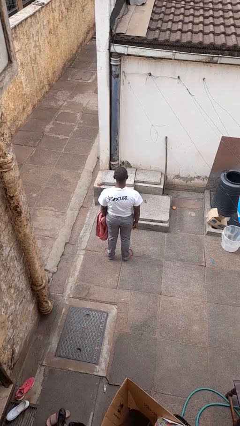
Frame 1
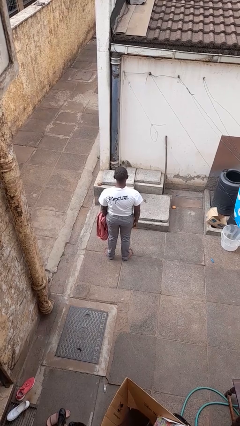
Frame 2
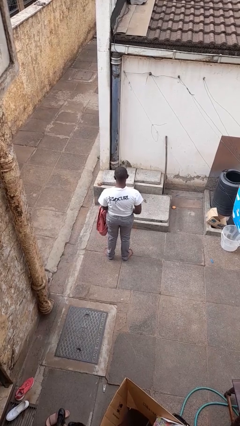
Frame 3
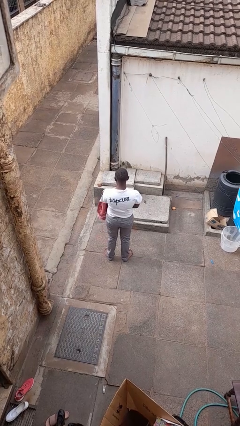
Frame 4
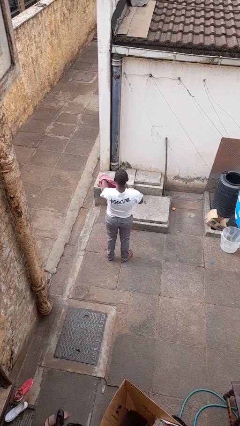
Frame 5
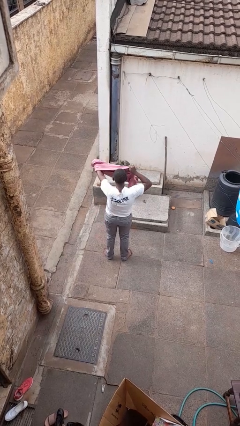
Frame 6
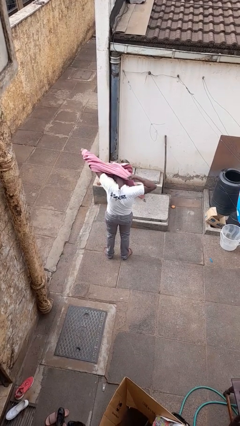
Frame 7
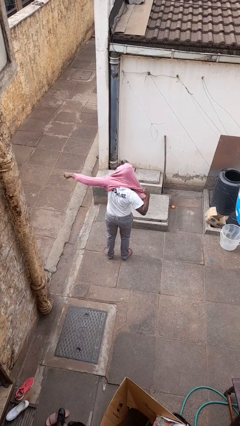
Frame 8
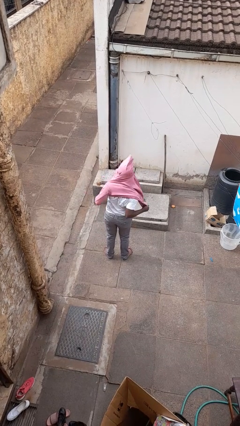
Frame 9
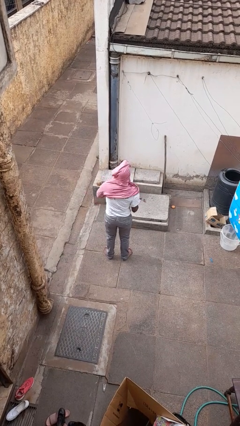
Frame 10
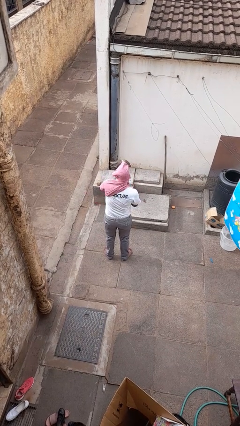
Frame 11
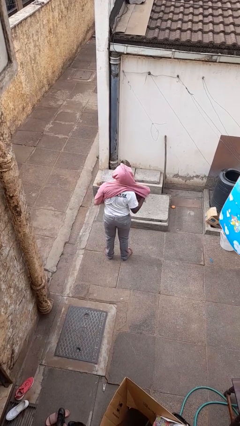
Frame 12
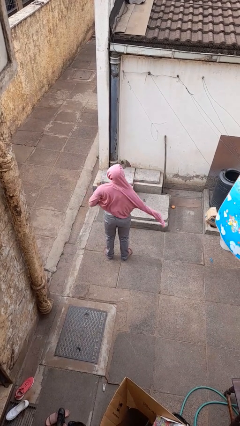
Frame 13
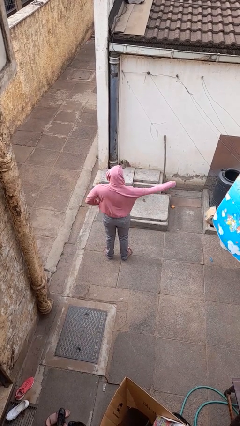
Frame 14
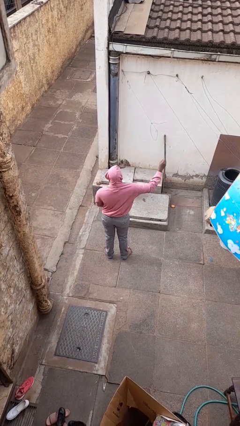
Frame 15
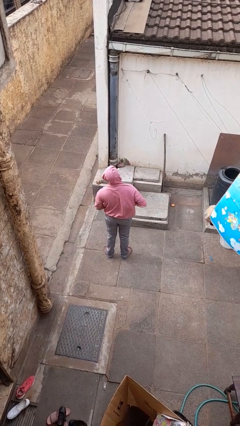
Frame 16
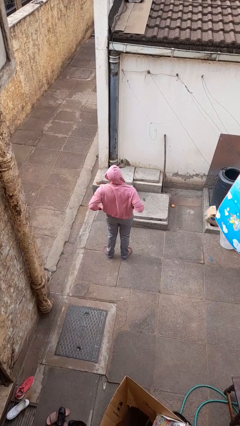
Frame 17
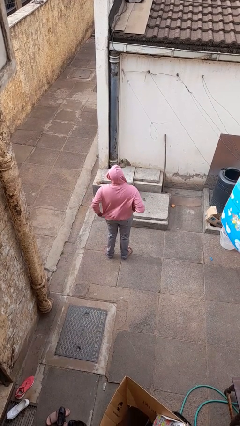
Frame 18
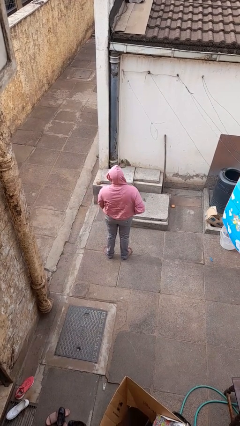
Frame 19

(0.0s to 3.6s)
person puts on hoodie

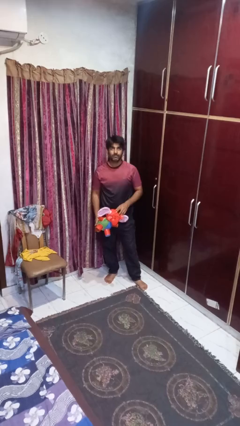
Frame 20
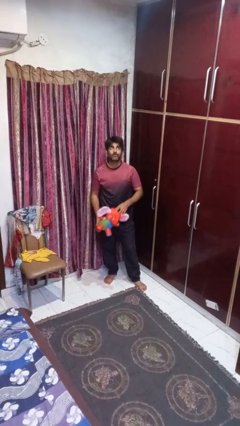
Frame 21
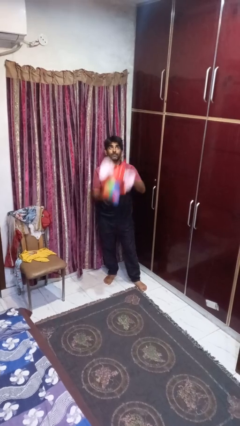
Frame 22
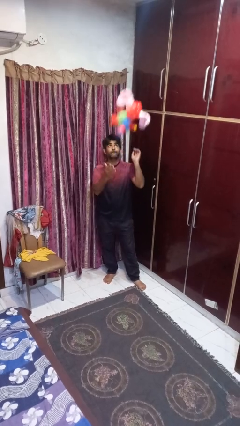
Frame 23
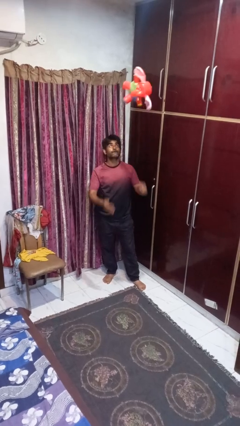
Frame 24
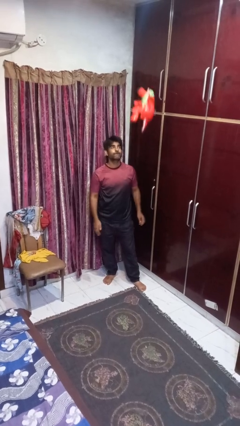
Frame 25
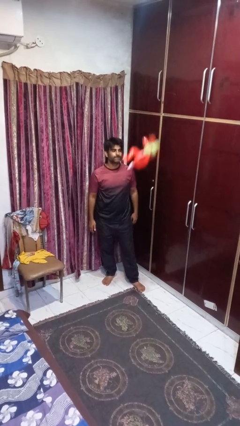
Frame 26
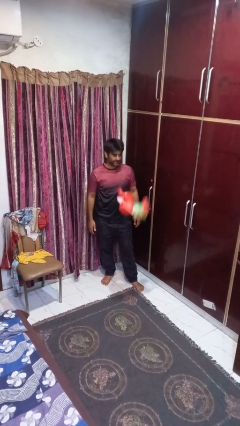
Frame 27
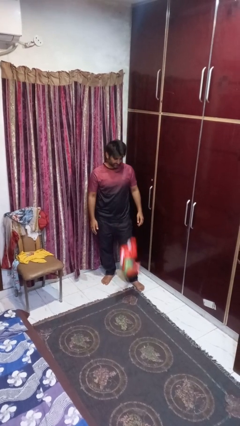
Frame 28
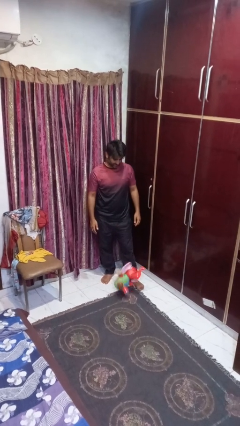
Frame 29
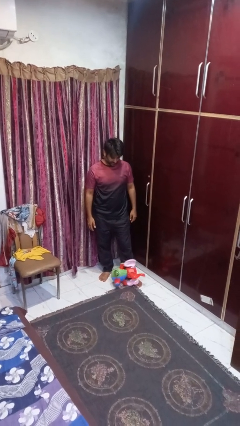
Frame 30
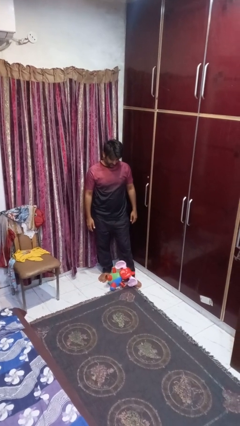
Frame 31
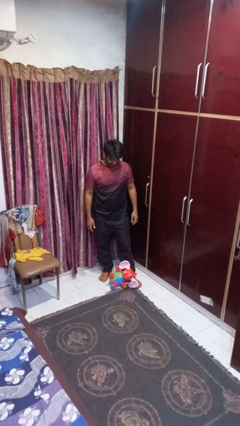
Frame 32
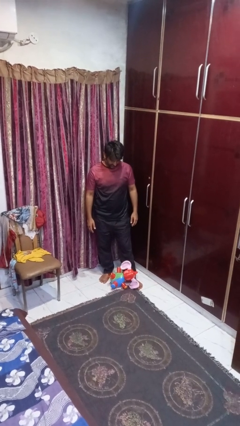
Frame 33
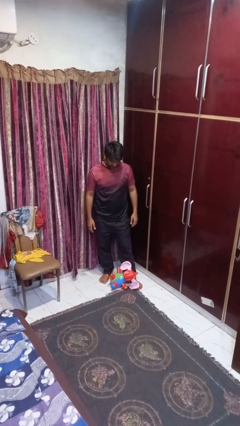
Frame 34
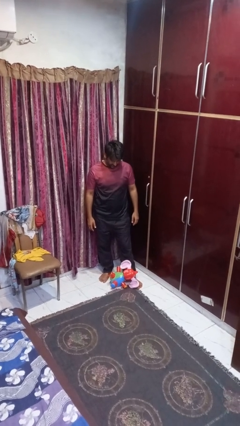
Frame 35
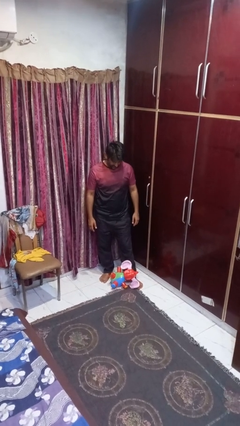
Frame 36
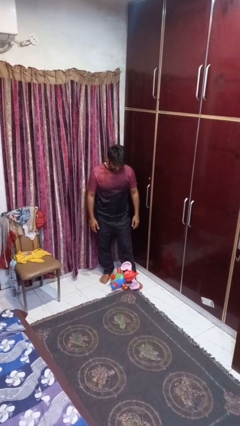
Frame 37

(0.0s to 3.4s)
person throws object into air

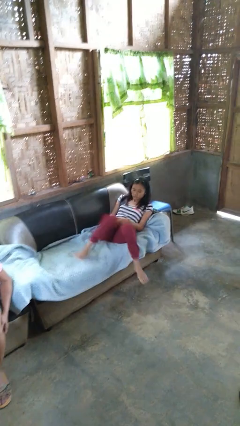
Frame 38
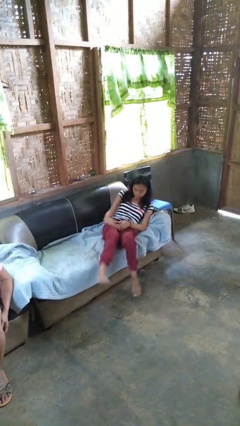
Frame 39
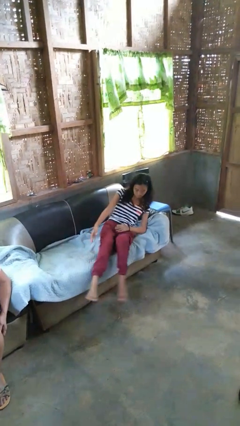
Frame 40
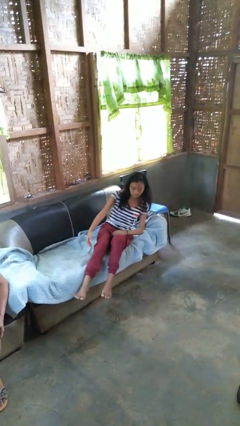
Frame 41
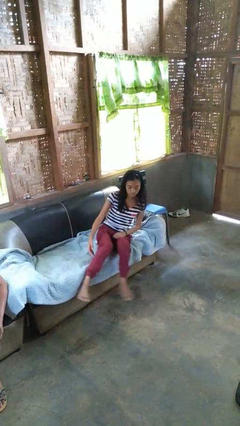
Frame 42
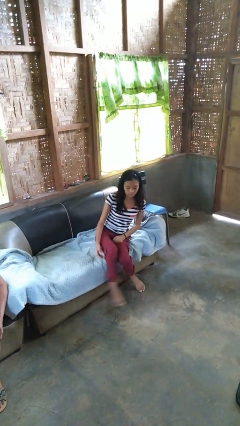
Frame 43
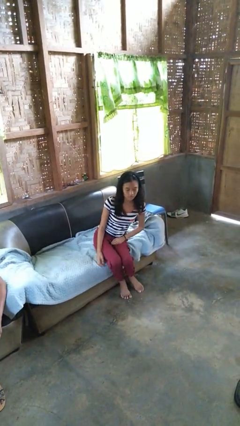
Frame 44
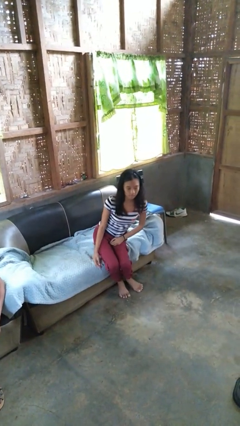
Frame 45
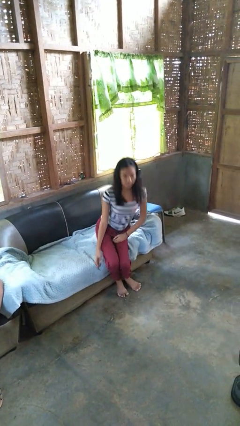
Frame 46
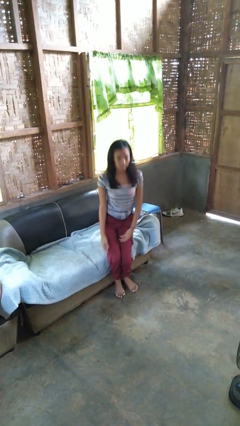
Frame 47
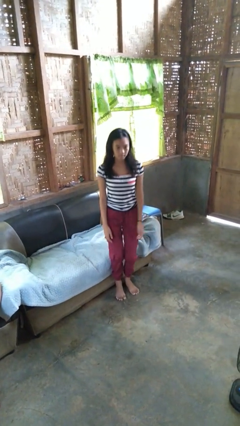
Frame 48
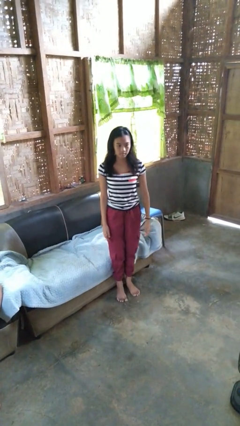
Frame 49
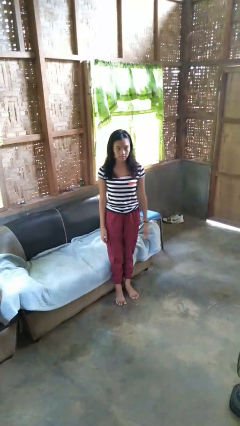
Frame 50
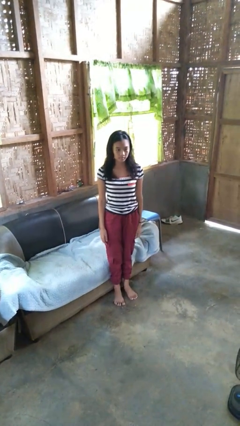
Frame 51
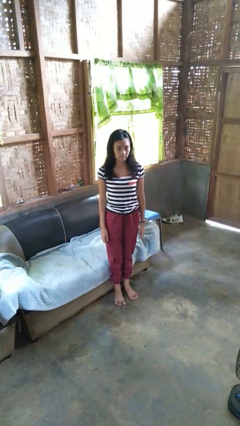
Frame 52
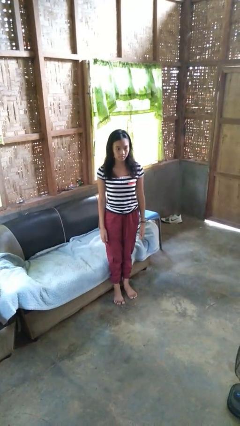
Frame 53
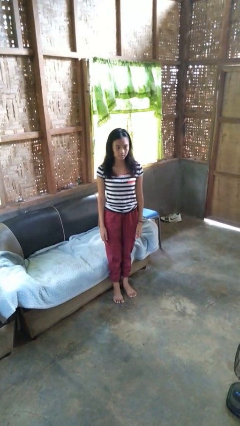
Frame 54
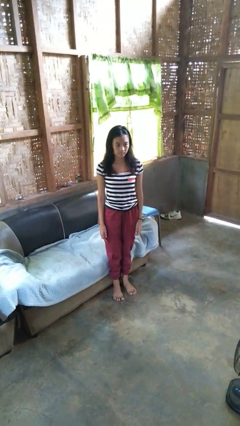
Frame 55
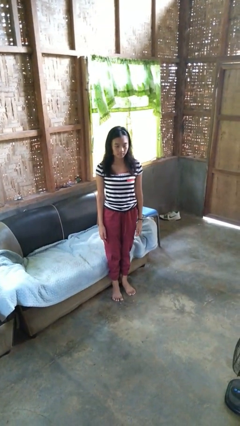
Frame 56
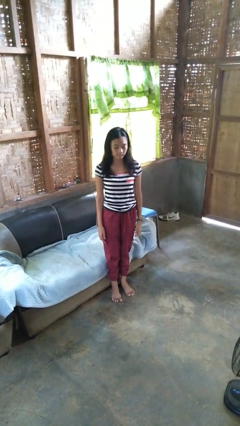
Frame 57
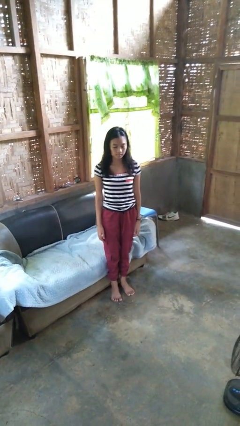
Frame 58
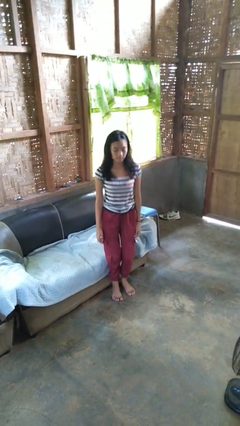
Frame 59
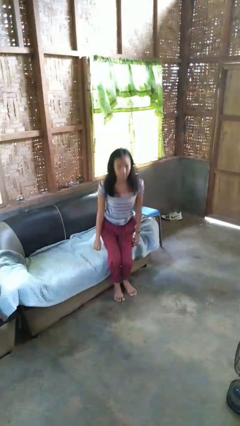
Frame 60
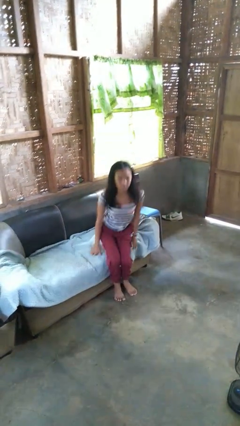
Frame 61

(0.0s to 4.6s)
person stands up

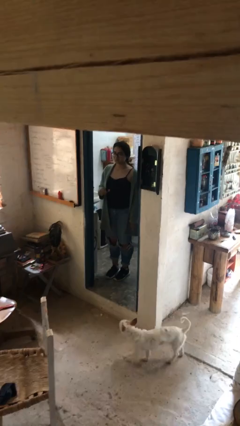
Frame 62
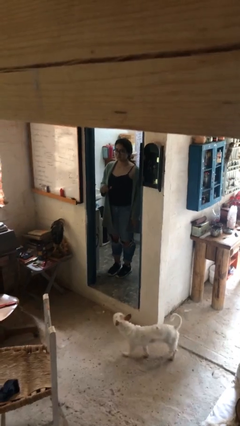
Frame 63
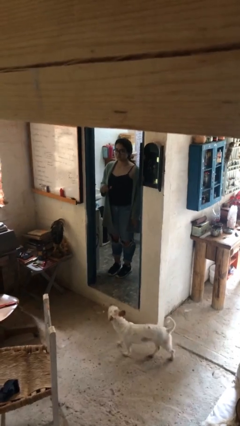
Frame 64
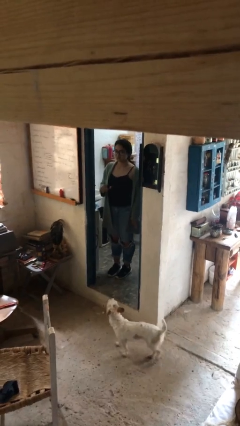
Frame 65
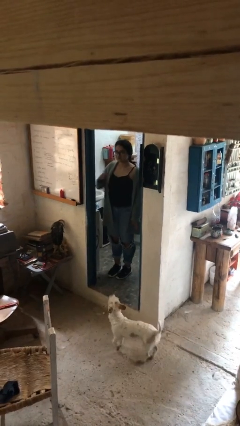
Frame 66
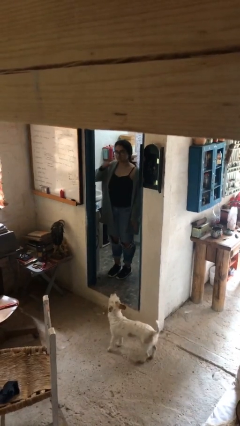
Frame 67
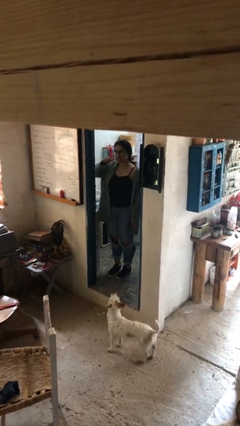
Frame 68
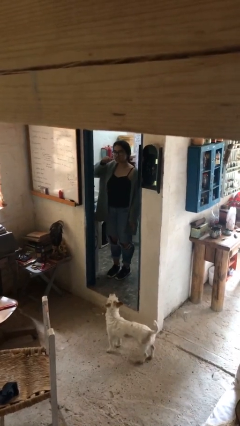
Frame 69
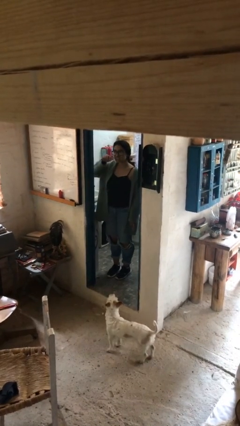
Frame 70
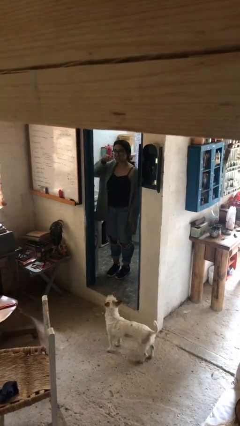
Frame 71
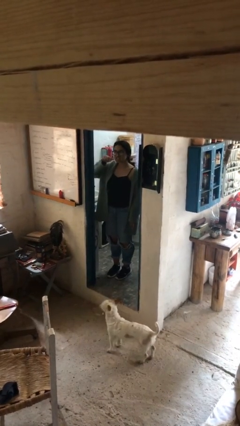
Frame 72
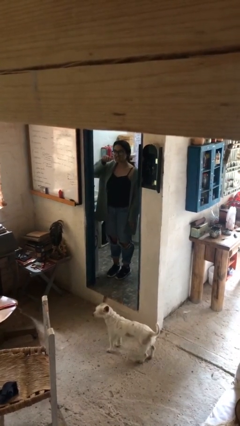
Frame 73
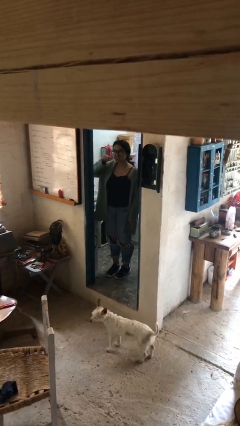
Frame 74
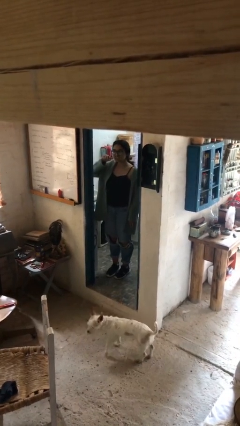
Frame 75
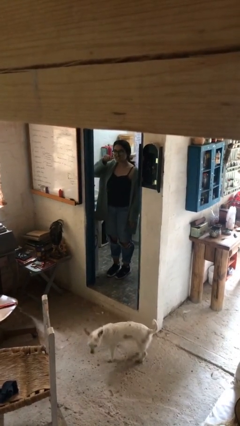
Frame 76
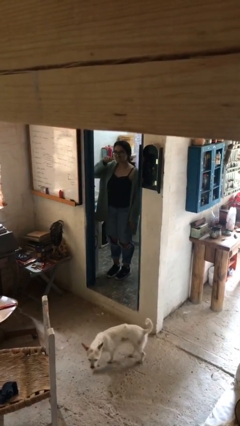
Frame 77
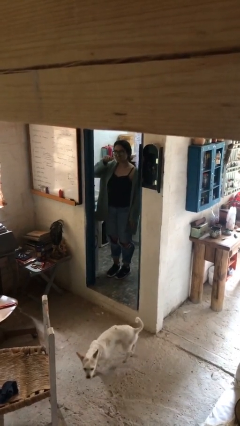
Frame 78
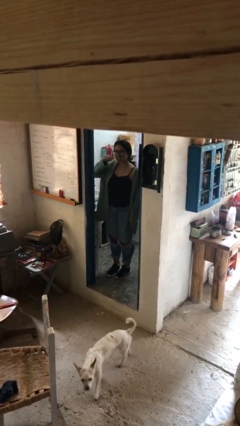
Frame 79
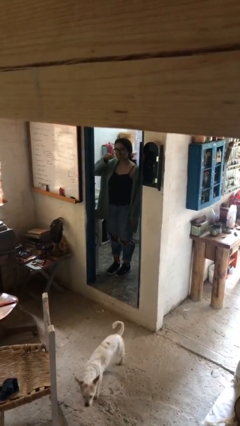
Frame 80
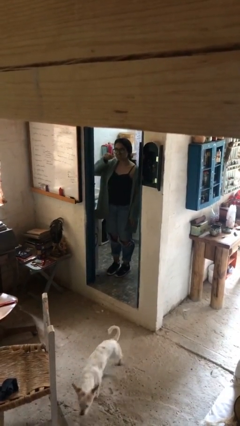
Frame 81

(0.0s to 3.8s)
person brushes teeth

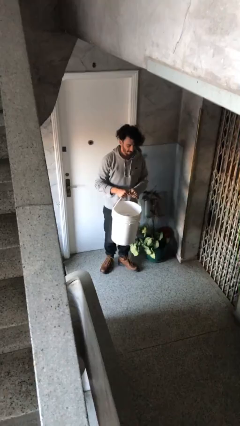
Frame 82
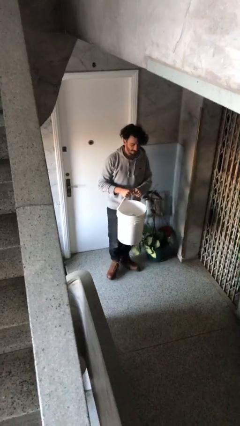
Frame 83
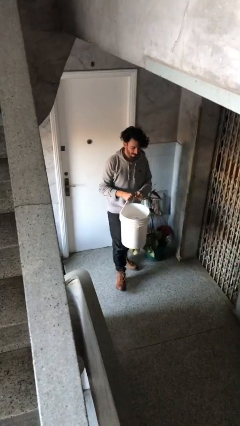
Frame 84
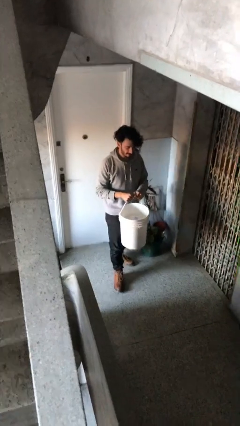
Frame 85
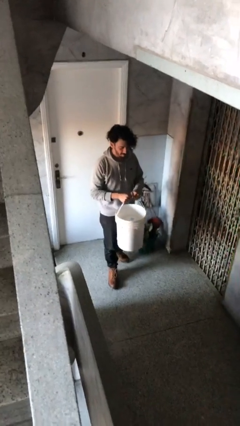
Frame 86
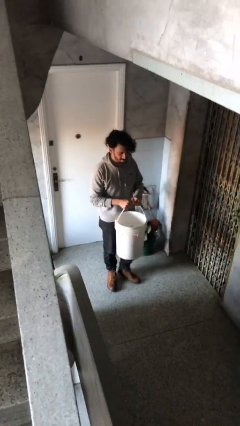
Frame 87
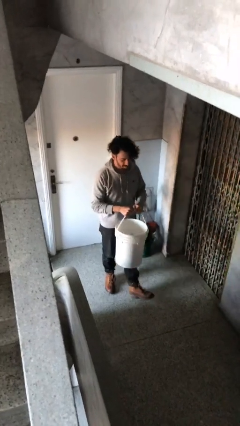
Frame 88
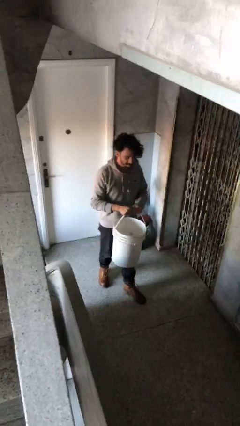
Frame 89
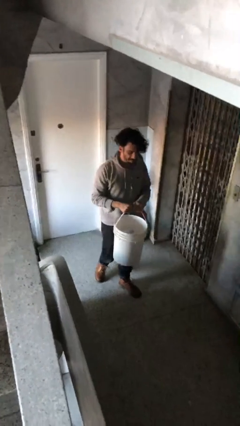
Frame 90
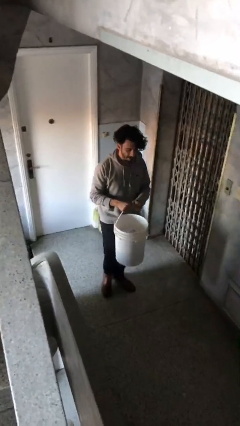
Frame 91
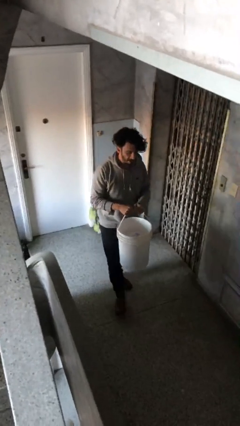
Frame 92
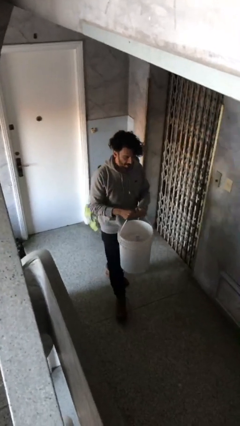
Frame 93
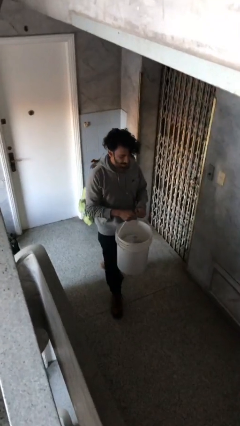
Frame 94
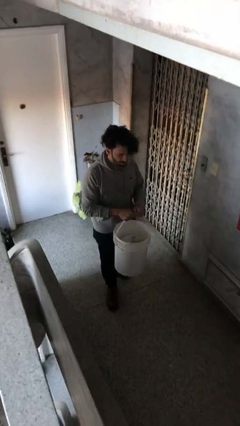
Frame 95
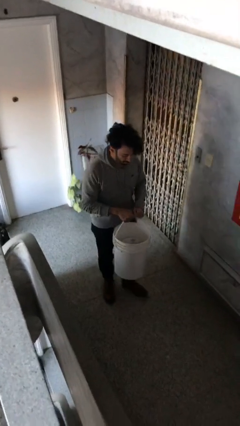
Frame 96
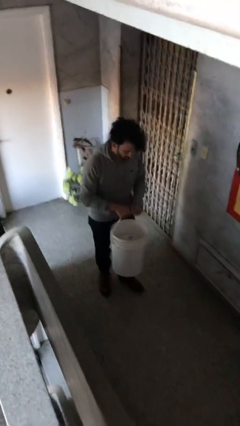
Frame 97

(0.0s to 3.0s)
person carries heavy object
